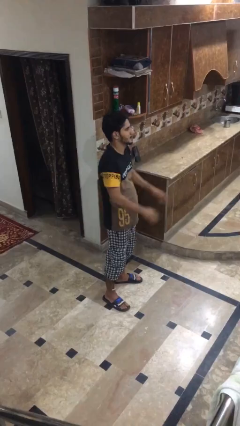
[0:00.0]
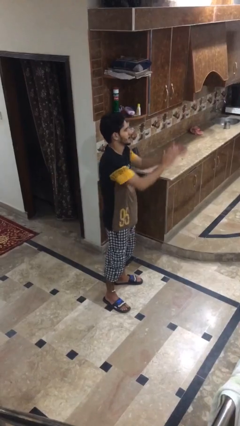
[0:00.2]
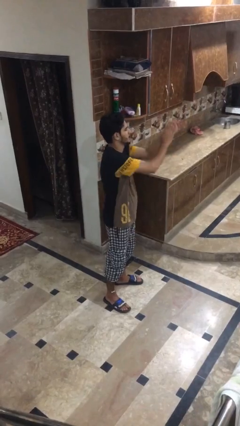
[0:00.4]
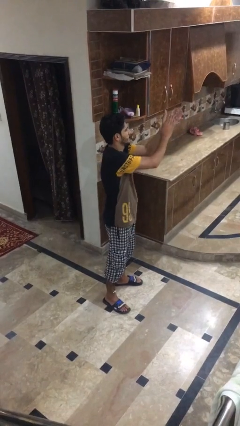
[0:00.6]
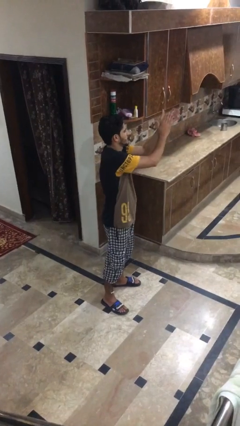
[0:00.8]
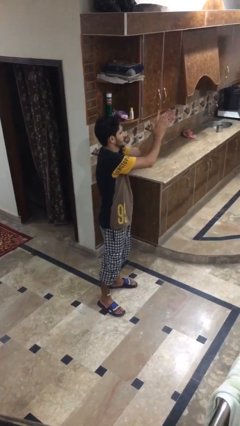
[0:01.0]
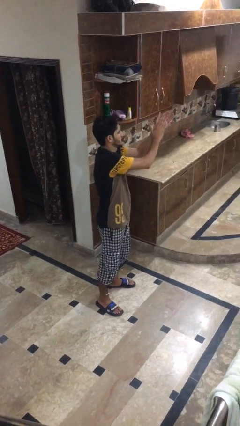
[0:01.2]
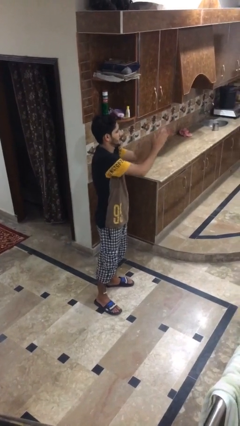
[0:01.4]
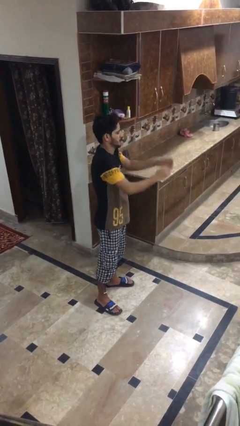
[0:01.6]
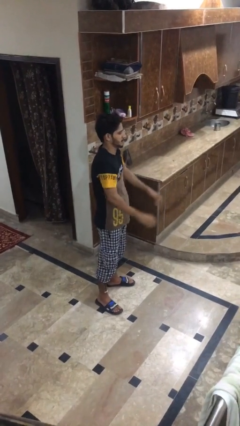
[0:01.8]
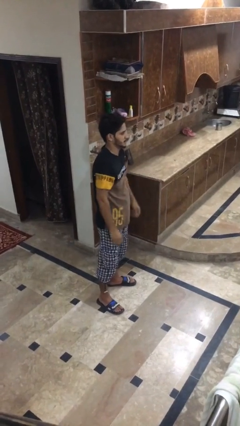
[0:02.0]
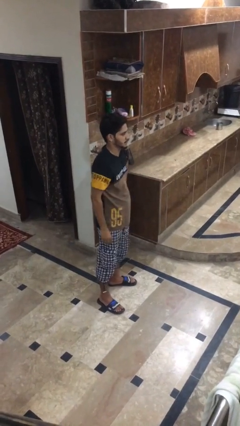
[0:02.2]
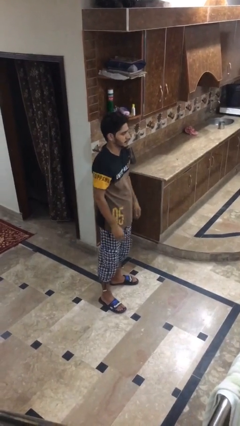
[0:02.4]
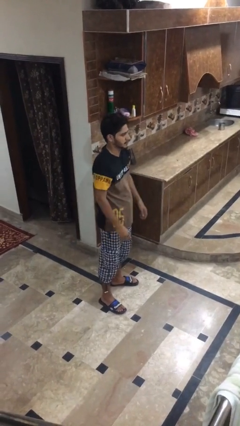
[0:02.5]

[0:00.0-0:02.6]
person claps hands

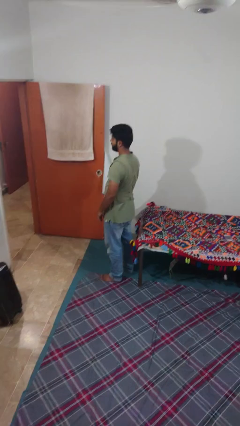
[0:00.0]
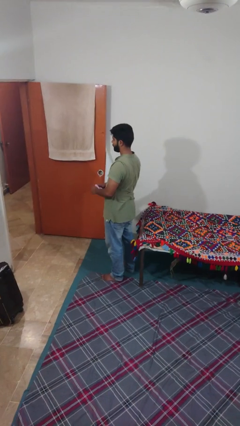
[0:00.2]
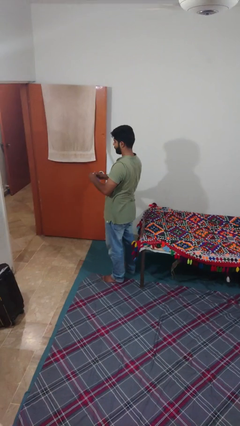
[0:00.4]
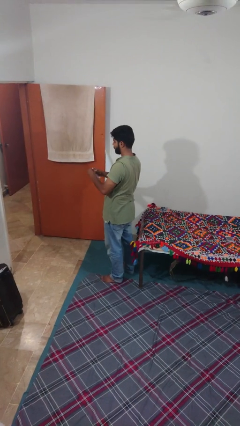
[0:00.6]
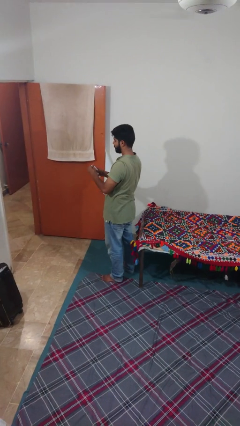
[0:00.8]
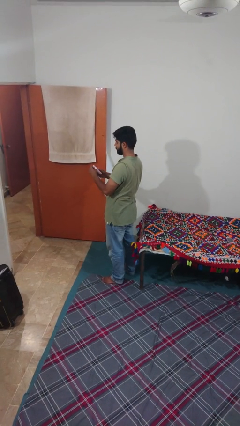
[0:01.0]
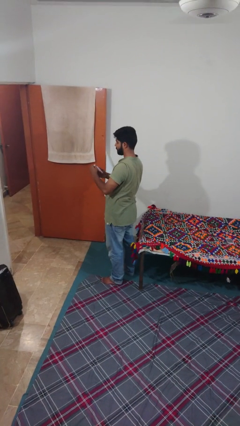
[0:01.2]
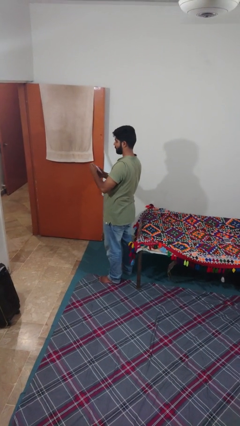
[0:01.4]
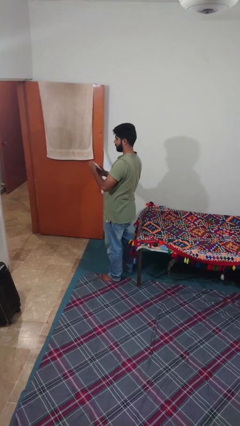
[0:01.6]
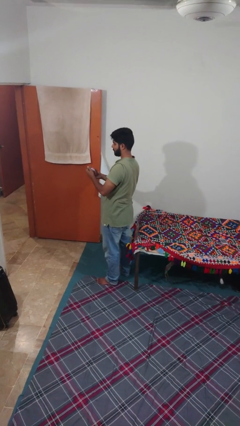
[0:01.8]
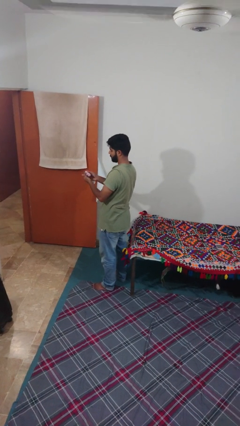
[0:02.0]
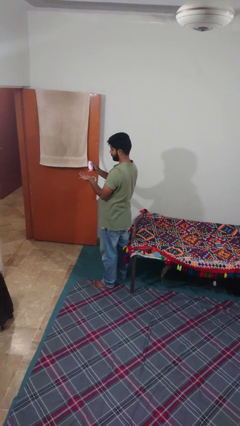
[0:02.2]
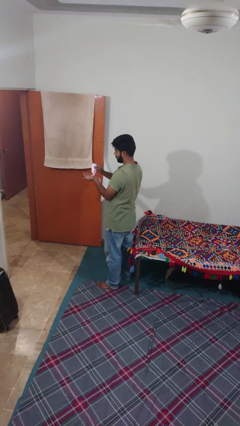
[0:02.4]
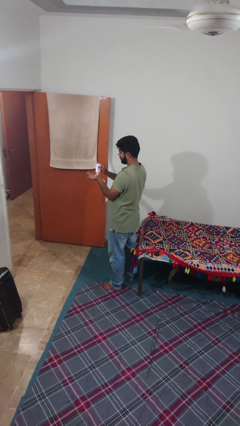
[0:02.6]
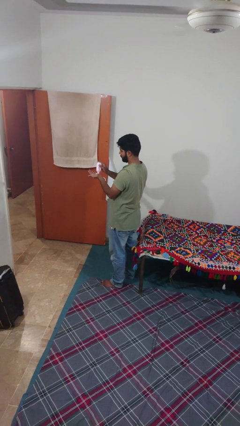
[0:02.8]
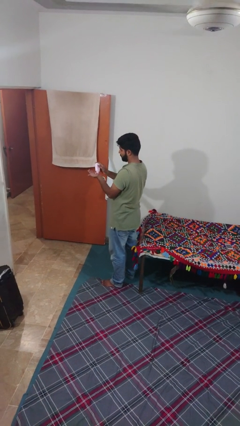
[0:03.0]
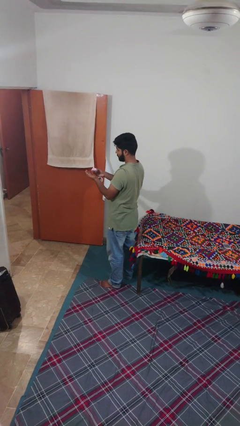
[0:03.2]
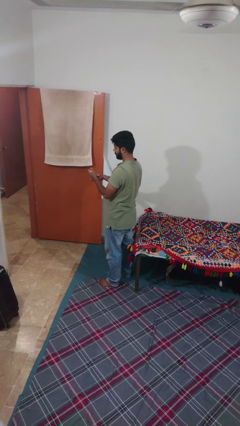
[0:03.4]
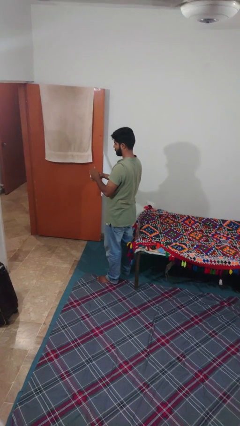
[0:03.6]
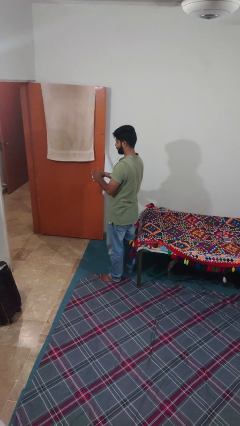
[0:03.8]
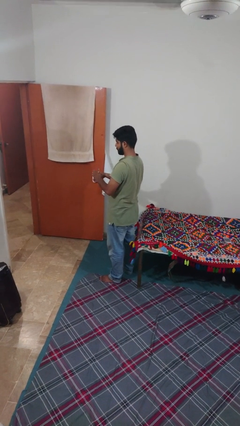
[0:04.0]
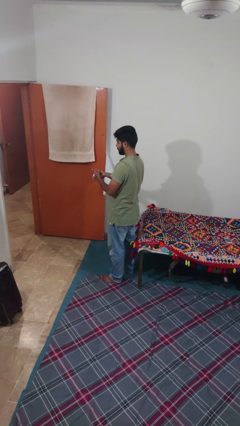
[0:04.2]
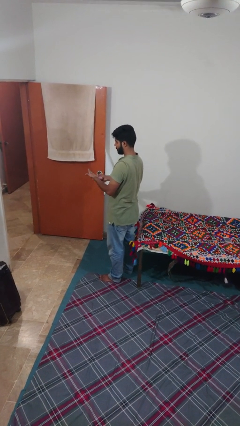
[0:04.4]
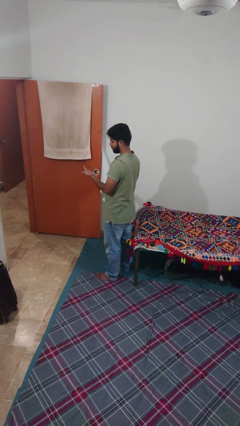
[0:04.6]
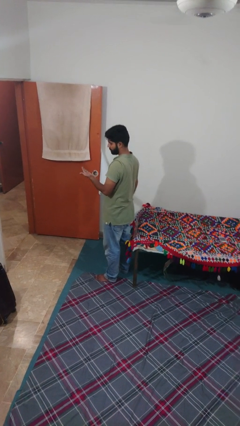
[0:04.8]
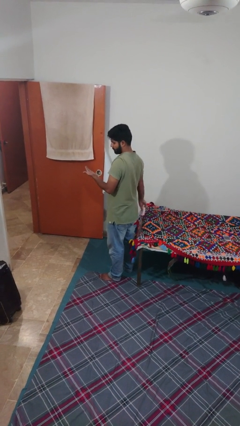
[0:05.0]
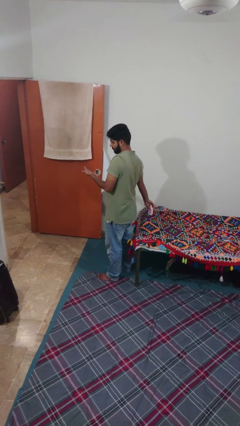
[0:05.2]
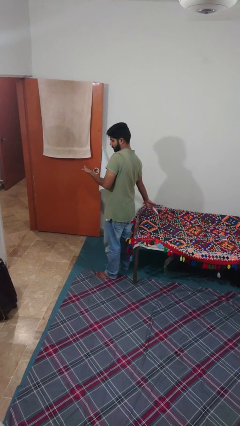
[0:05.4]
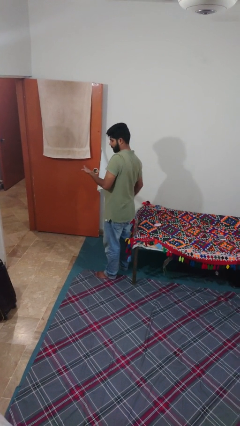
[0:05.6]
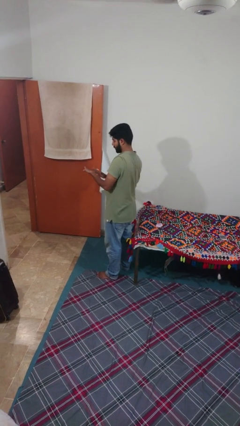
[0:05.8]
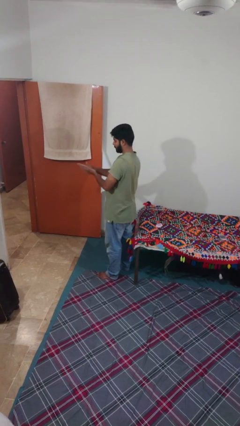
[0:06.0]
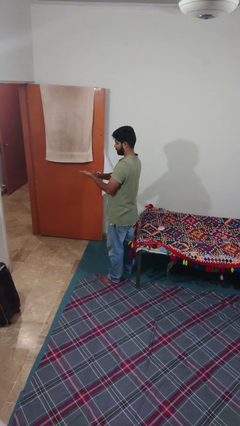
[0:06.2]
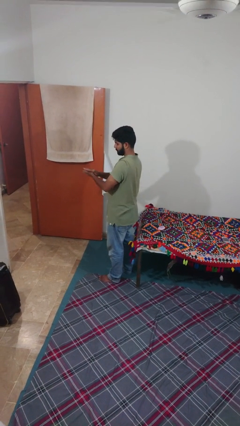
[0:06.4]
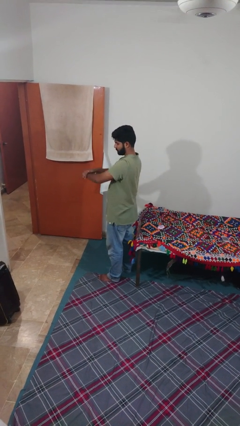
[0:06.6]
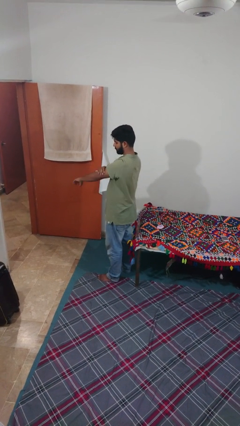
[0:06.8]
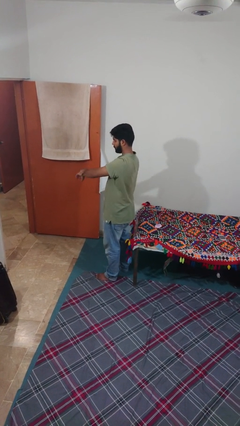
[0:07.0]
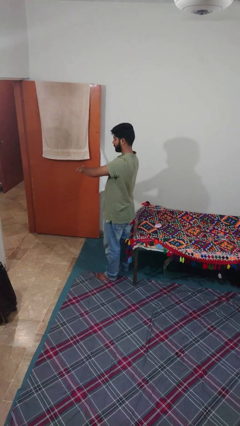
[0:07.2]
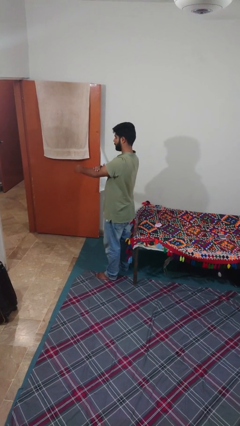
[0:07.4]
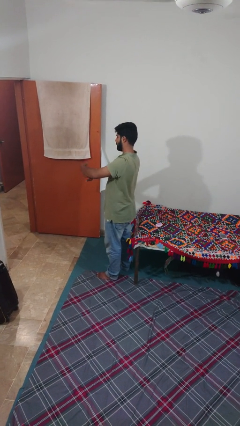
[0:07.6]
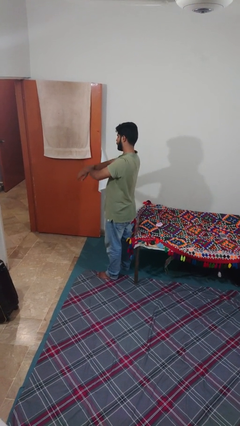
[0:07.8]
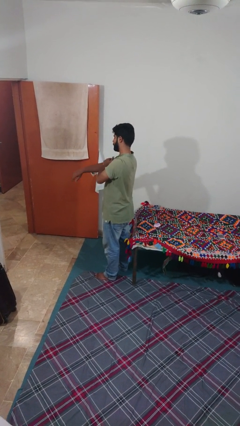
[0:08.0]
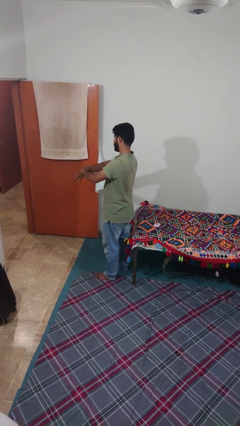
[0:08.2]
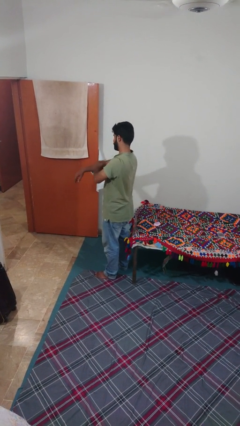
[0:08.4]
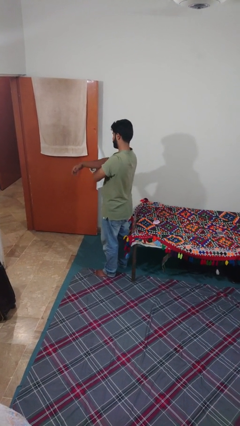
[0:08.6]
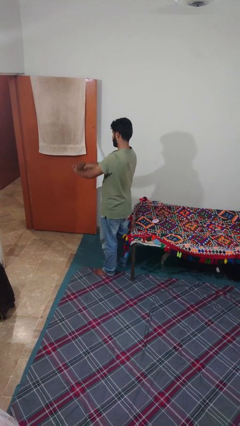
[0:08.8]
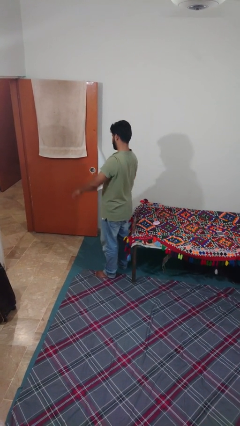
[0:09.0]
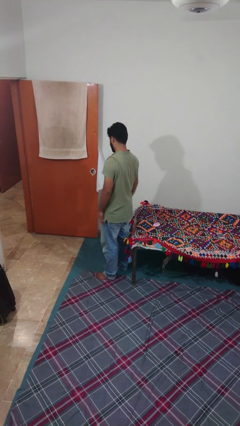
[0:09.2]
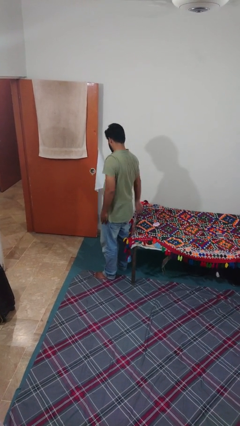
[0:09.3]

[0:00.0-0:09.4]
person applies sunscreen

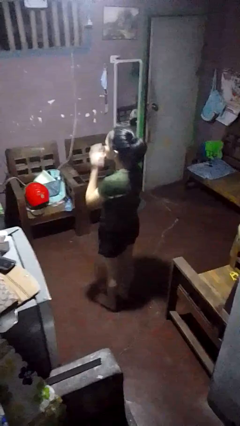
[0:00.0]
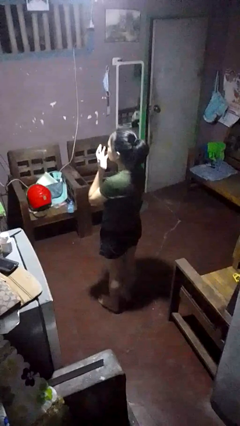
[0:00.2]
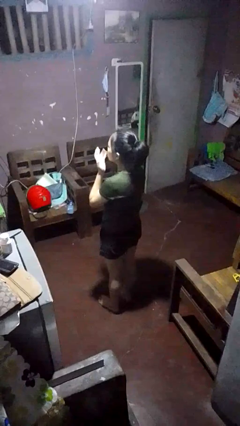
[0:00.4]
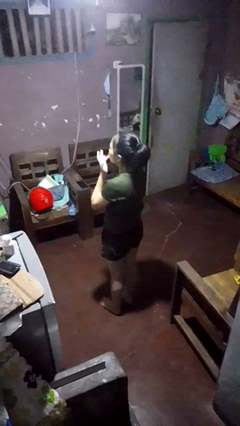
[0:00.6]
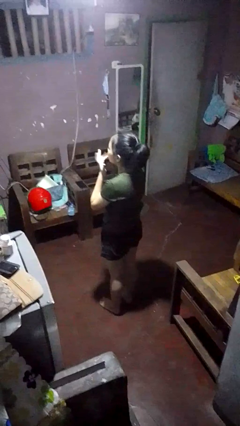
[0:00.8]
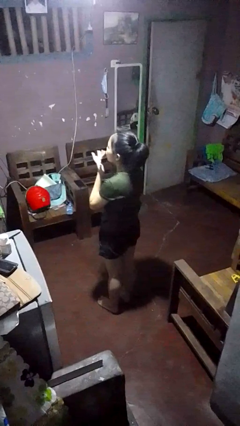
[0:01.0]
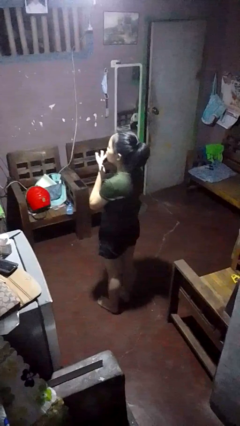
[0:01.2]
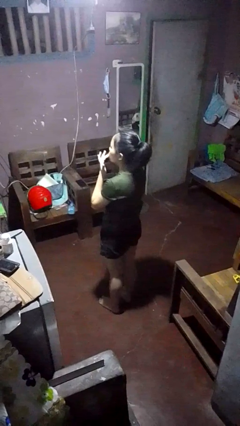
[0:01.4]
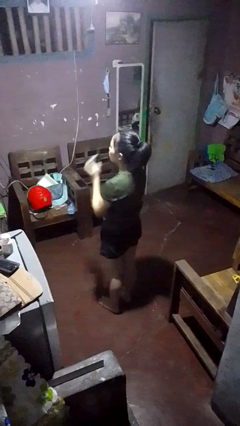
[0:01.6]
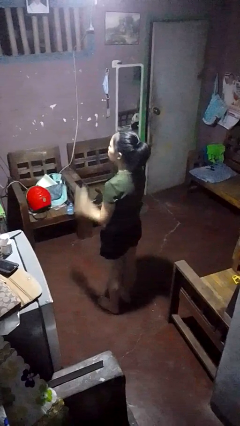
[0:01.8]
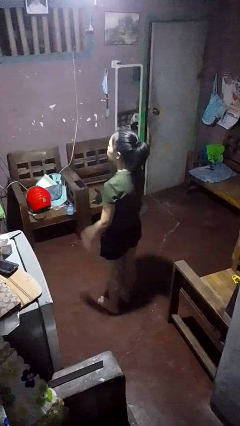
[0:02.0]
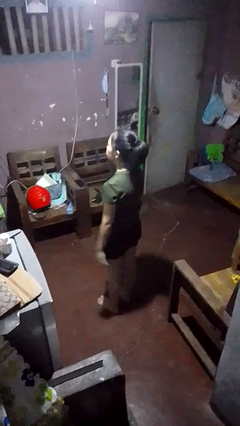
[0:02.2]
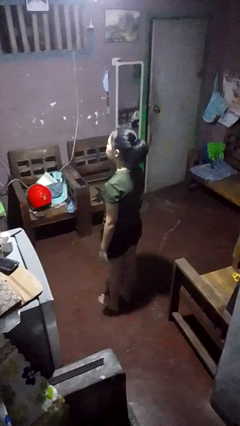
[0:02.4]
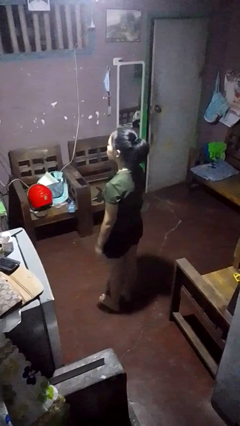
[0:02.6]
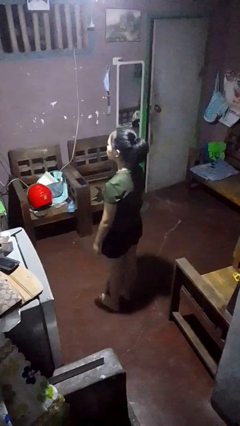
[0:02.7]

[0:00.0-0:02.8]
person licks fingers

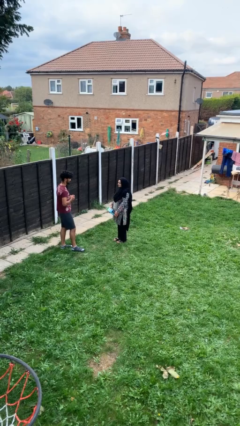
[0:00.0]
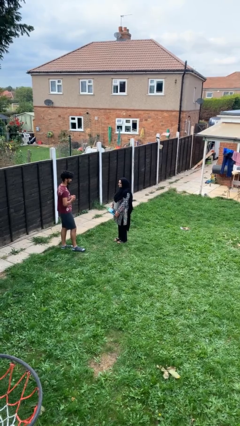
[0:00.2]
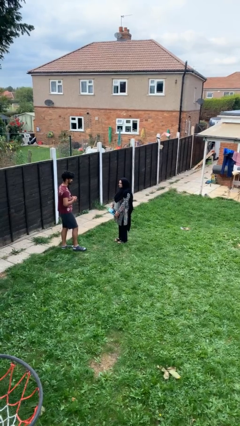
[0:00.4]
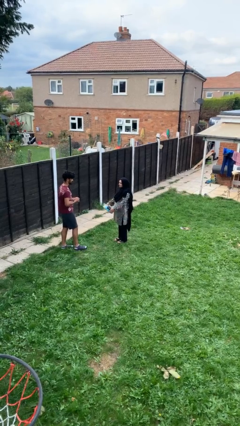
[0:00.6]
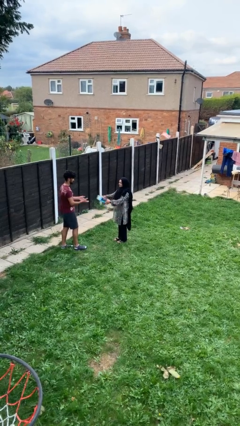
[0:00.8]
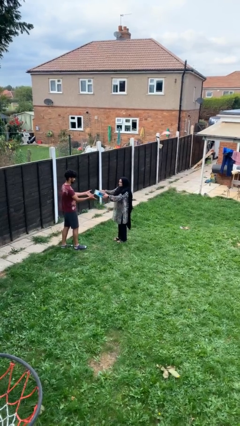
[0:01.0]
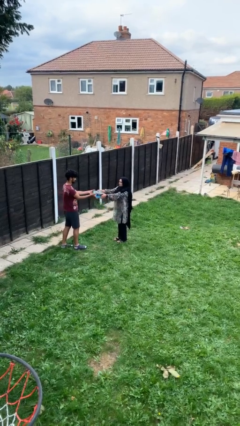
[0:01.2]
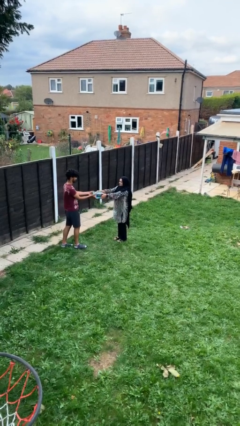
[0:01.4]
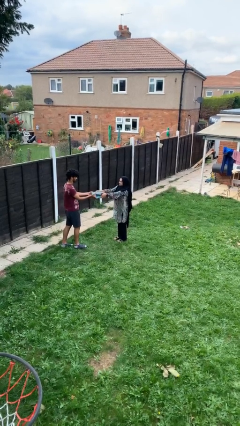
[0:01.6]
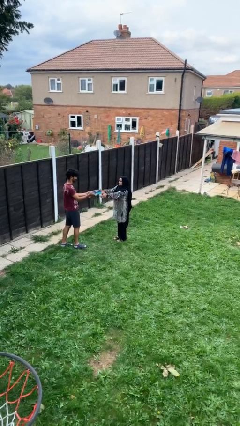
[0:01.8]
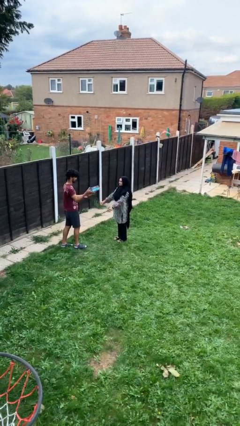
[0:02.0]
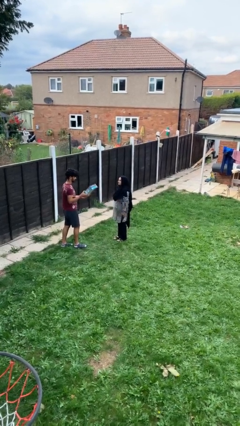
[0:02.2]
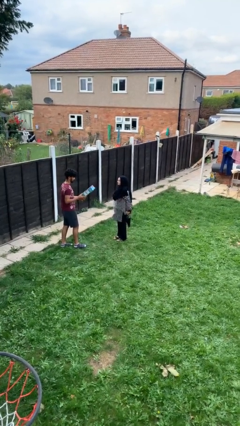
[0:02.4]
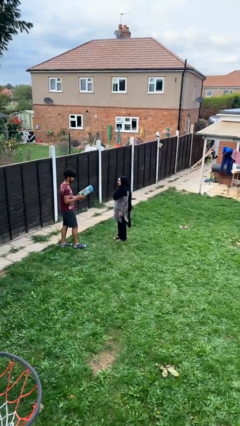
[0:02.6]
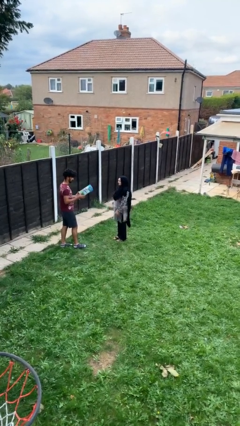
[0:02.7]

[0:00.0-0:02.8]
person transfers object to person
